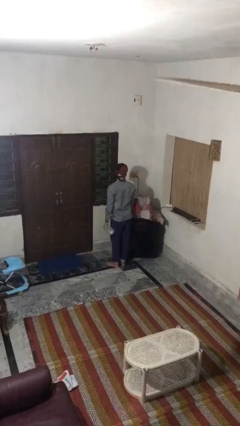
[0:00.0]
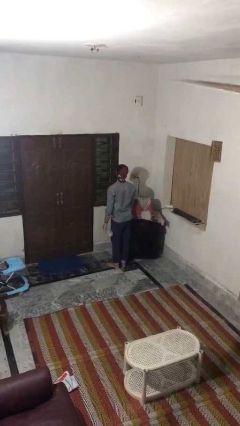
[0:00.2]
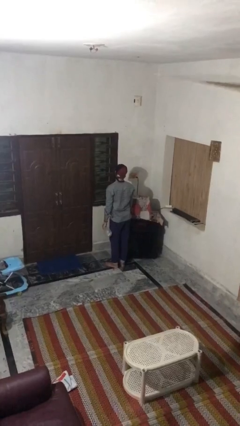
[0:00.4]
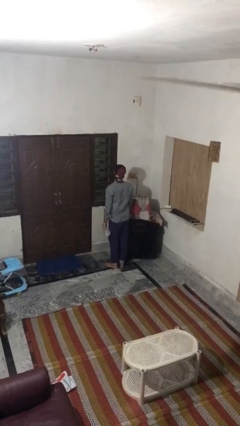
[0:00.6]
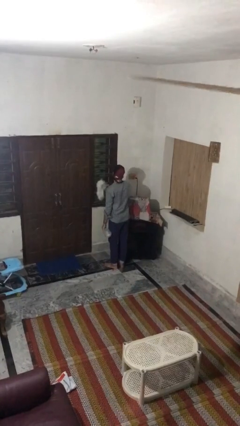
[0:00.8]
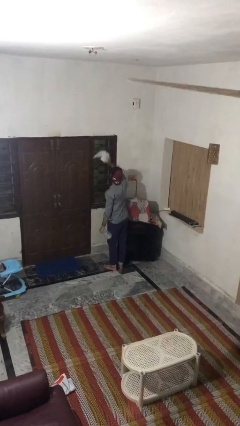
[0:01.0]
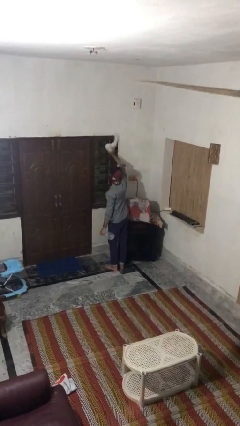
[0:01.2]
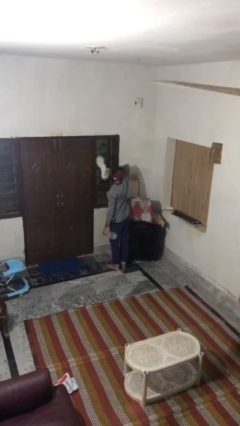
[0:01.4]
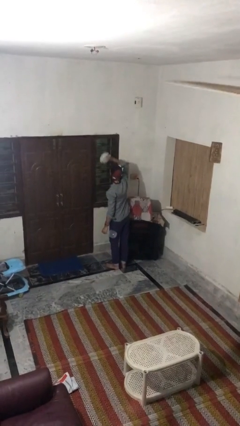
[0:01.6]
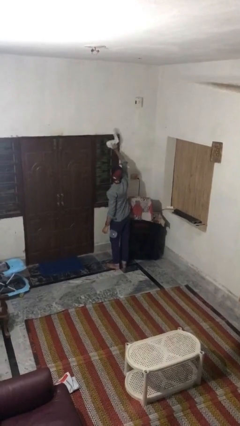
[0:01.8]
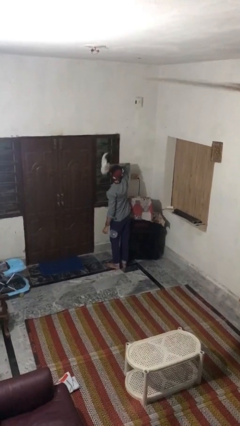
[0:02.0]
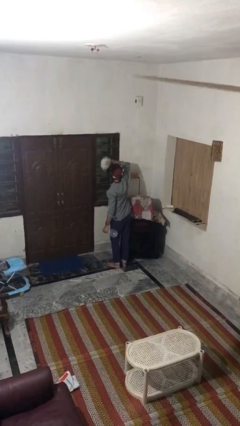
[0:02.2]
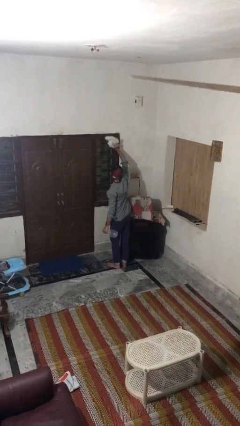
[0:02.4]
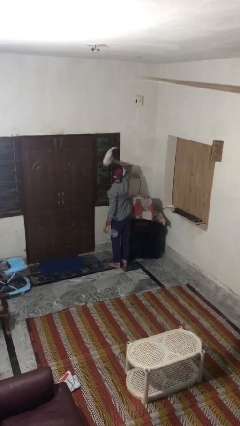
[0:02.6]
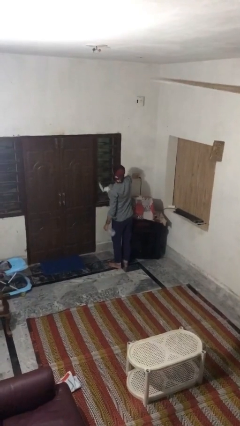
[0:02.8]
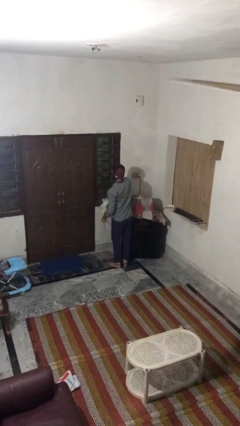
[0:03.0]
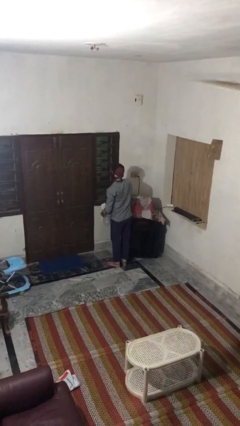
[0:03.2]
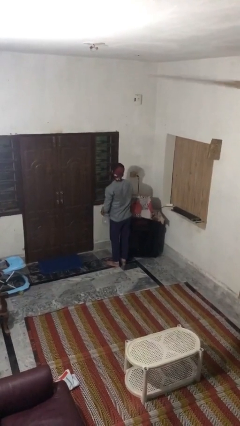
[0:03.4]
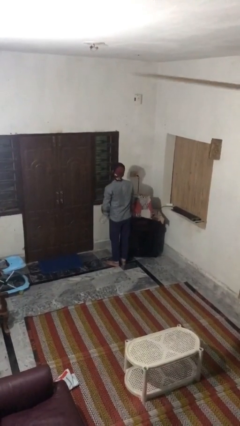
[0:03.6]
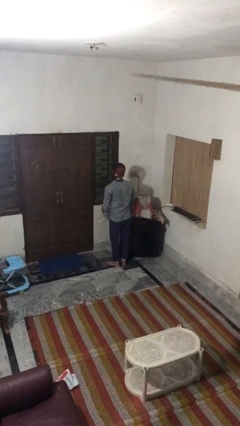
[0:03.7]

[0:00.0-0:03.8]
person washes window

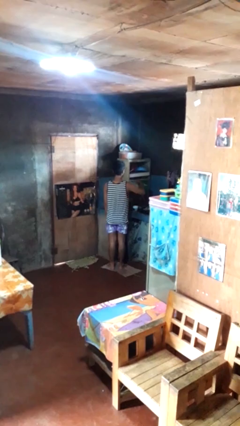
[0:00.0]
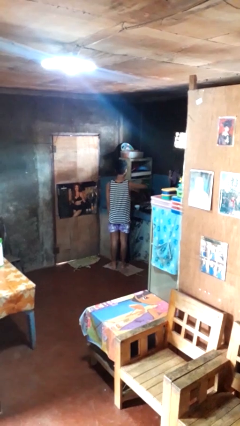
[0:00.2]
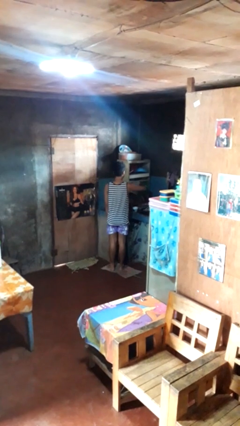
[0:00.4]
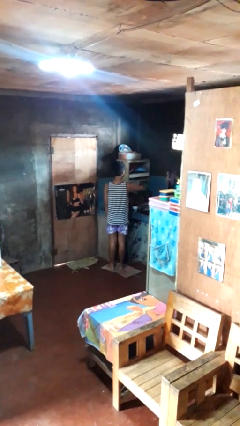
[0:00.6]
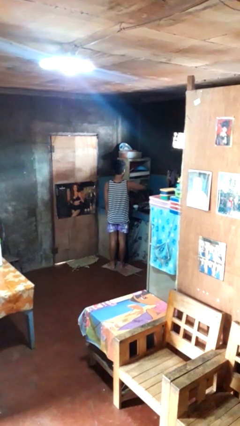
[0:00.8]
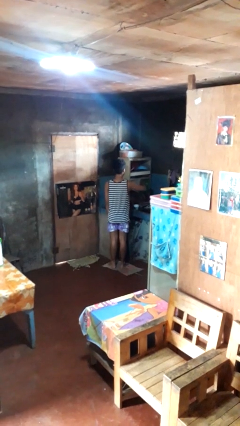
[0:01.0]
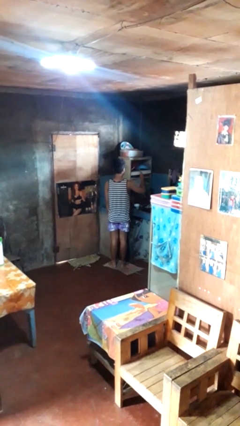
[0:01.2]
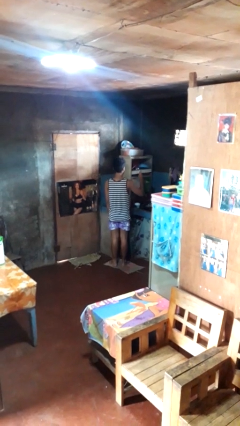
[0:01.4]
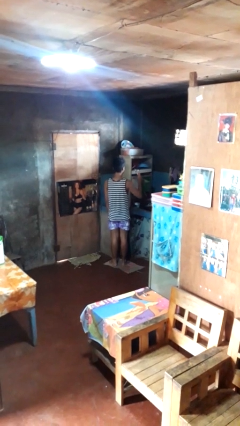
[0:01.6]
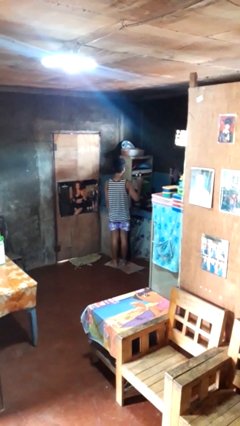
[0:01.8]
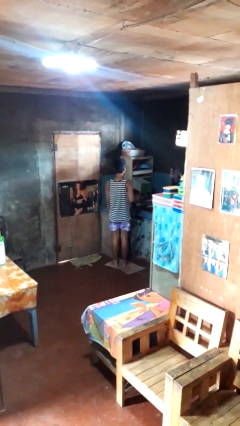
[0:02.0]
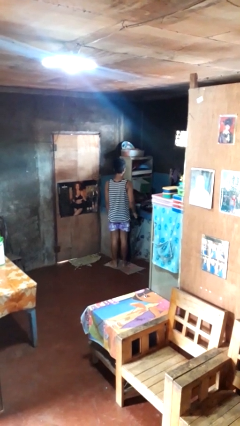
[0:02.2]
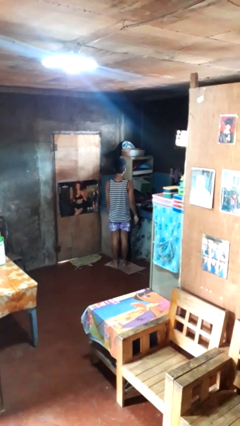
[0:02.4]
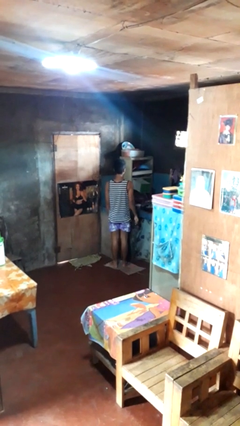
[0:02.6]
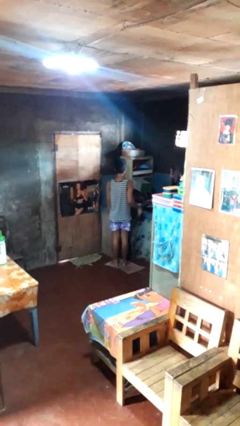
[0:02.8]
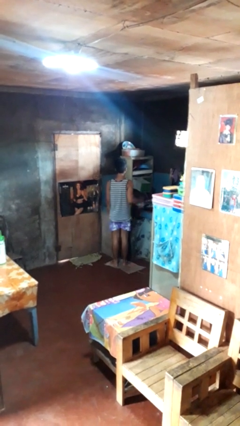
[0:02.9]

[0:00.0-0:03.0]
person takes object from kitchen drawer

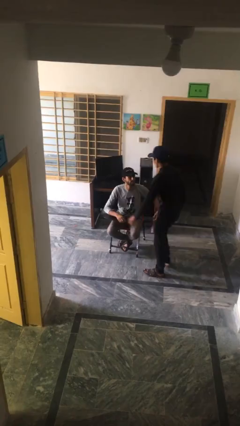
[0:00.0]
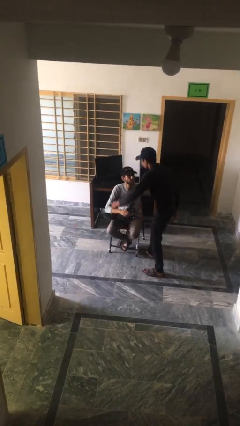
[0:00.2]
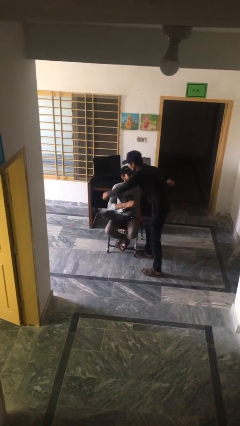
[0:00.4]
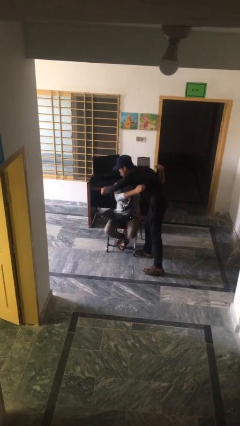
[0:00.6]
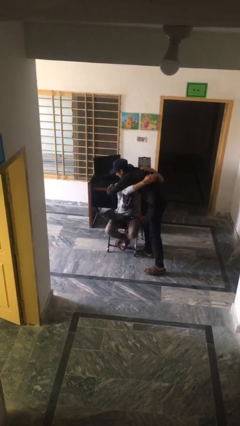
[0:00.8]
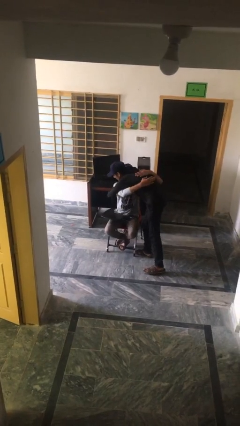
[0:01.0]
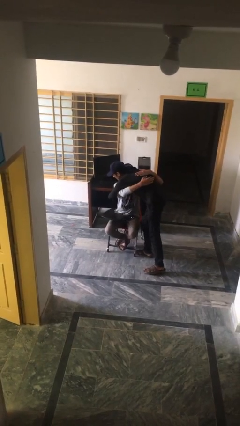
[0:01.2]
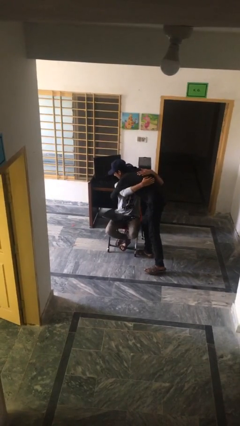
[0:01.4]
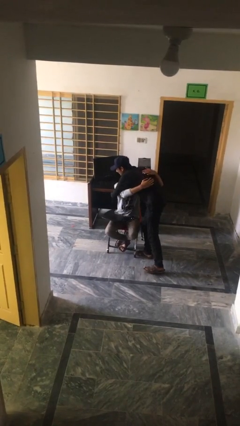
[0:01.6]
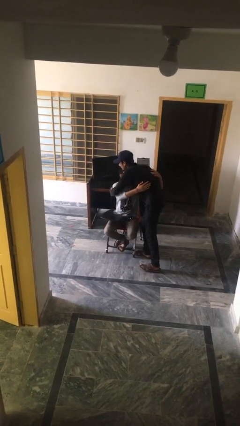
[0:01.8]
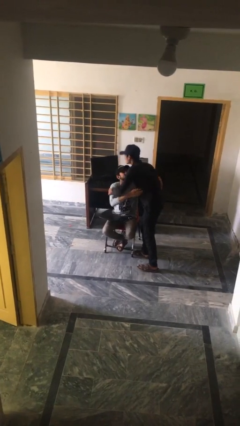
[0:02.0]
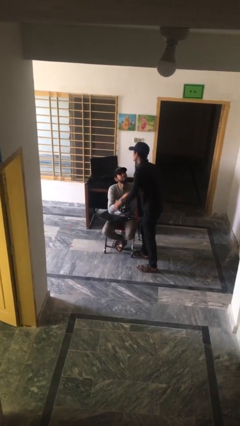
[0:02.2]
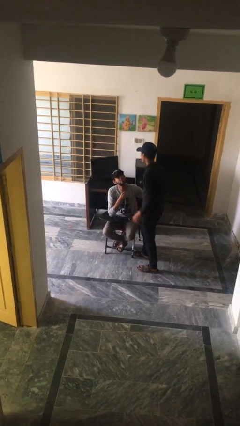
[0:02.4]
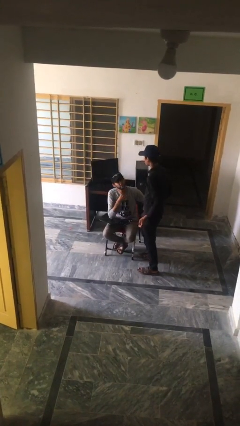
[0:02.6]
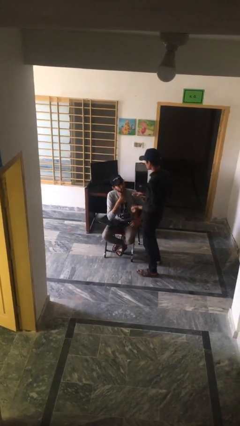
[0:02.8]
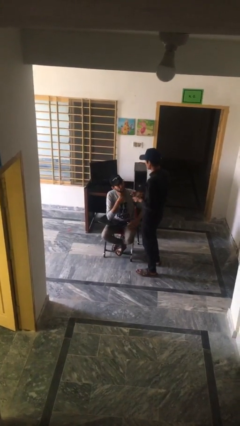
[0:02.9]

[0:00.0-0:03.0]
person embraces person

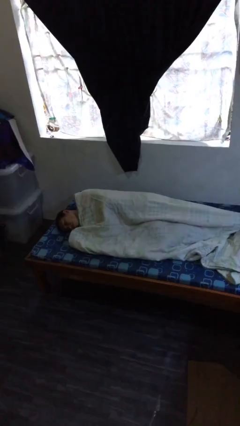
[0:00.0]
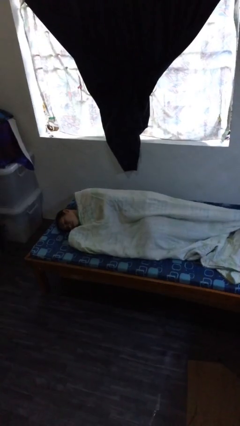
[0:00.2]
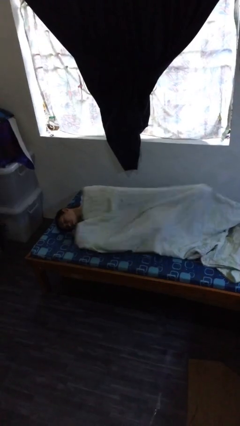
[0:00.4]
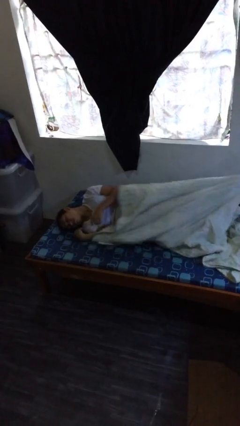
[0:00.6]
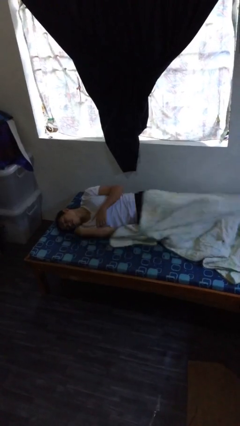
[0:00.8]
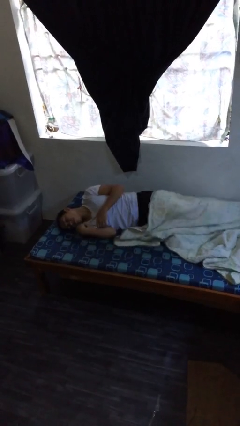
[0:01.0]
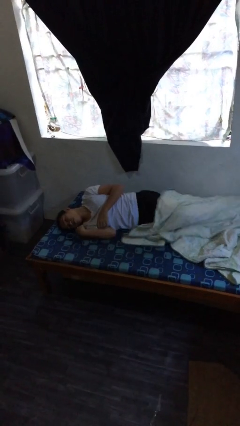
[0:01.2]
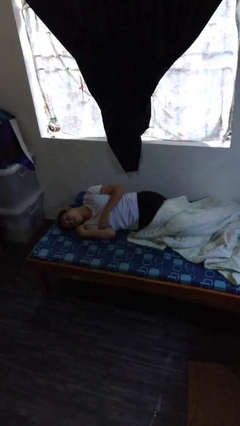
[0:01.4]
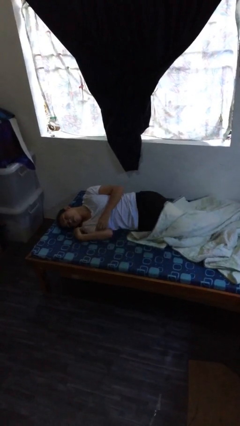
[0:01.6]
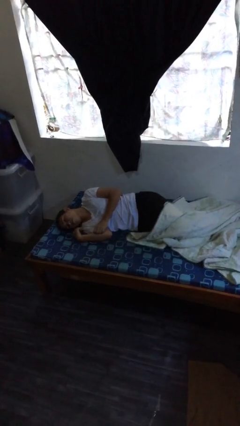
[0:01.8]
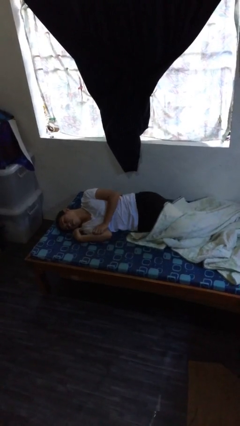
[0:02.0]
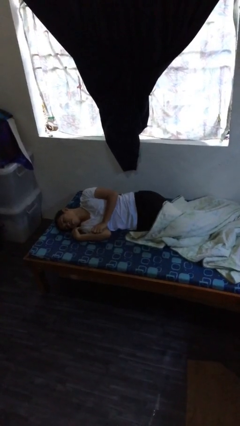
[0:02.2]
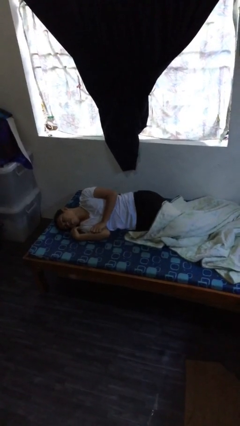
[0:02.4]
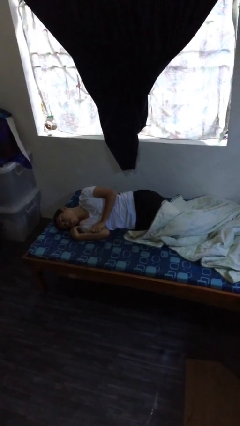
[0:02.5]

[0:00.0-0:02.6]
person uncovers with bedsheets

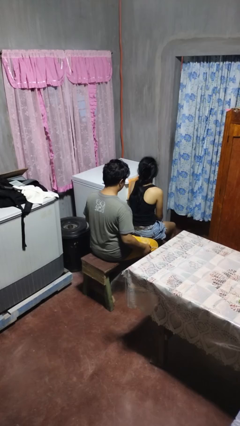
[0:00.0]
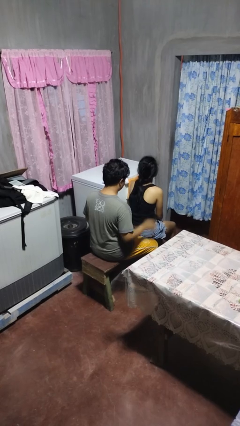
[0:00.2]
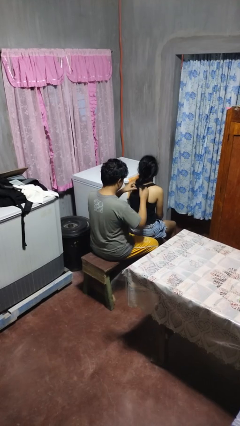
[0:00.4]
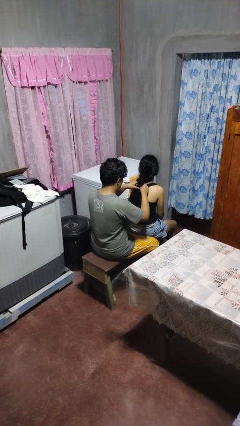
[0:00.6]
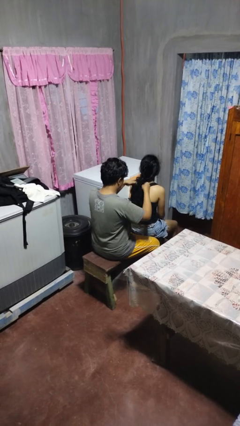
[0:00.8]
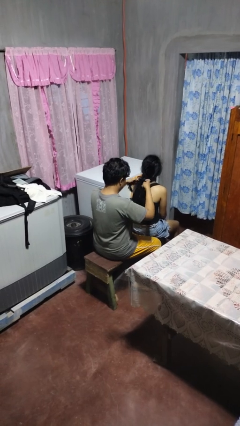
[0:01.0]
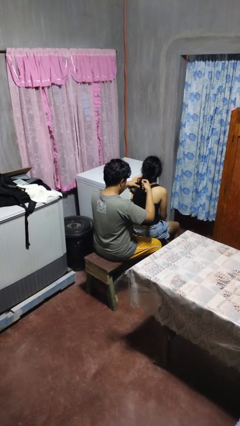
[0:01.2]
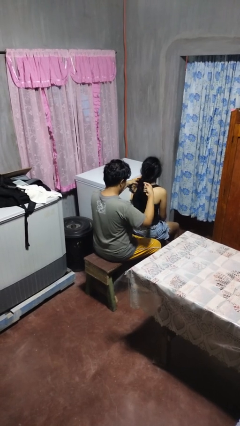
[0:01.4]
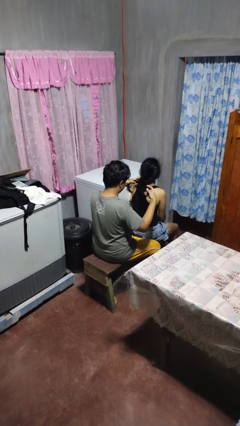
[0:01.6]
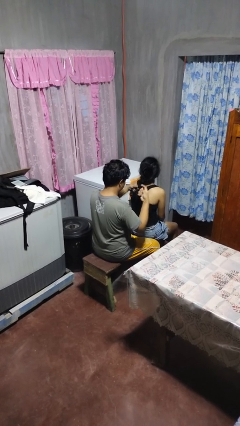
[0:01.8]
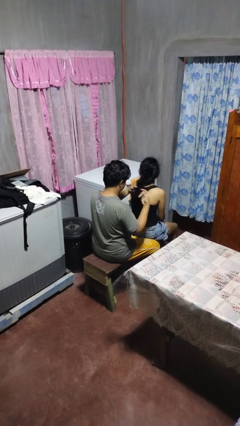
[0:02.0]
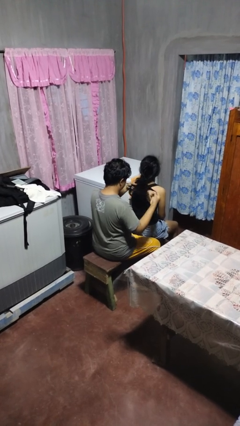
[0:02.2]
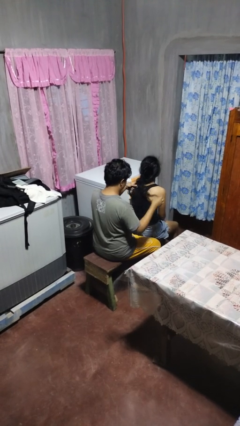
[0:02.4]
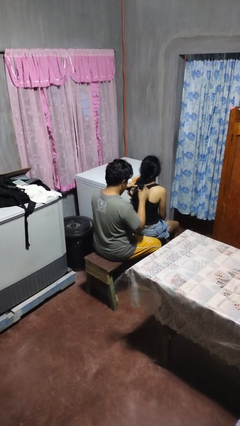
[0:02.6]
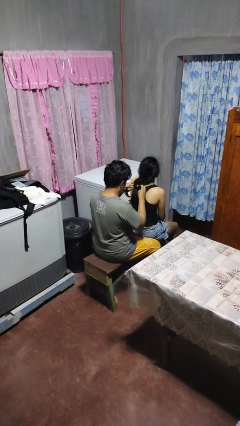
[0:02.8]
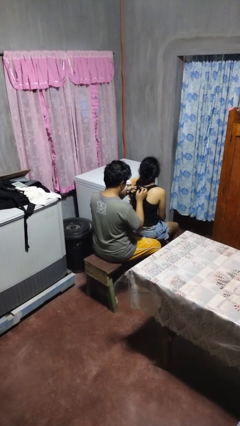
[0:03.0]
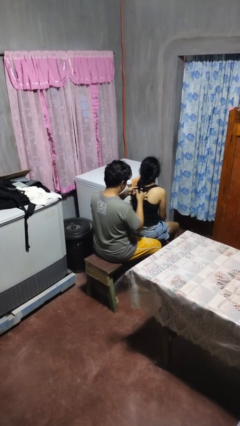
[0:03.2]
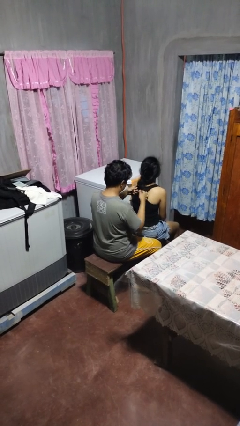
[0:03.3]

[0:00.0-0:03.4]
person braids hair of person

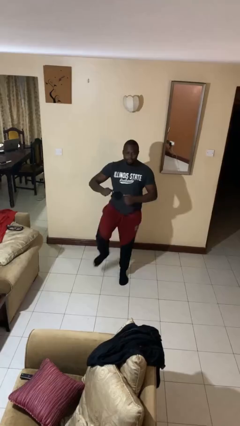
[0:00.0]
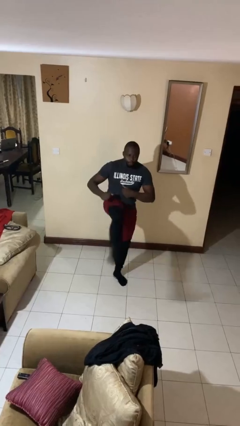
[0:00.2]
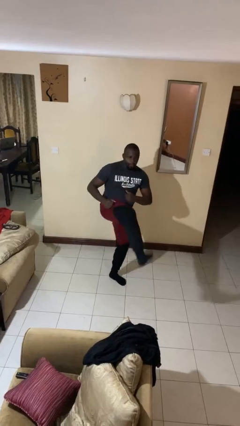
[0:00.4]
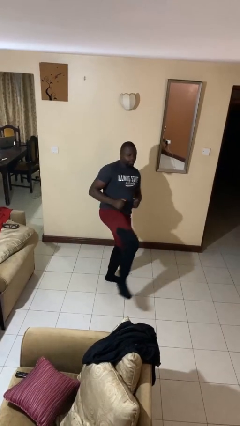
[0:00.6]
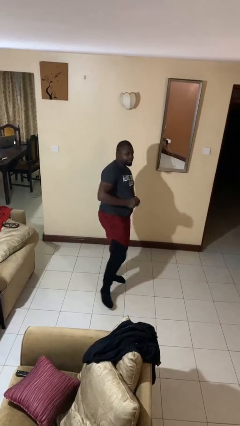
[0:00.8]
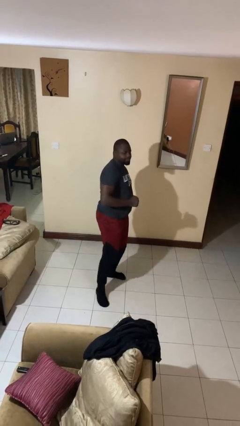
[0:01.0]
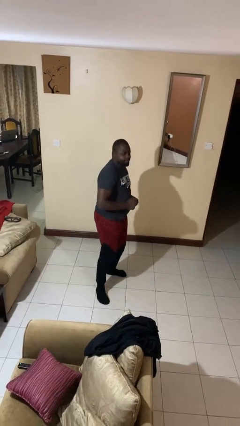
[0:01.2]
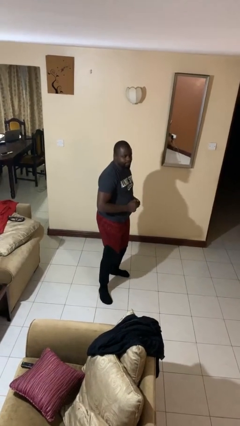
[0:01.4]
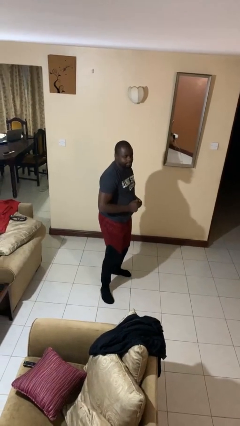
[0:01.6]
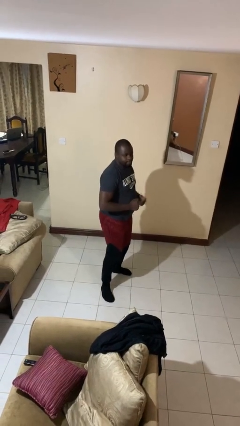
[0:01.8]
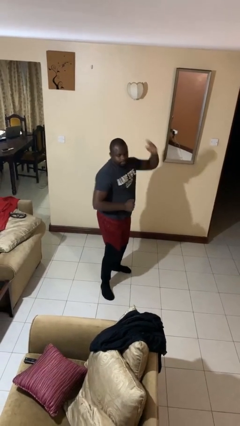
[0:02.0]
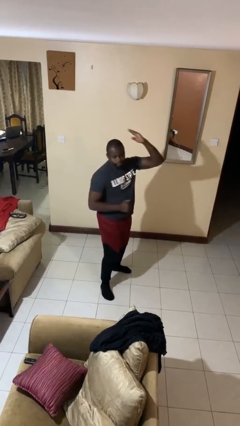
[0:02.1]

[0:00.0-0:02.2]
person karate kicks
